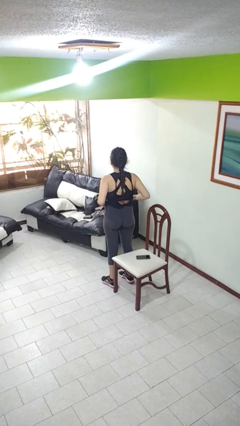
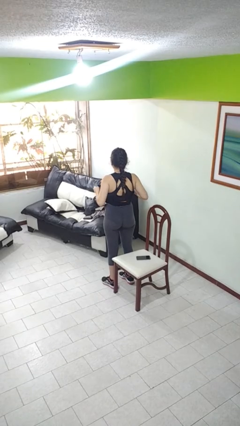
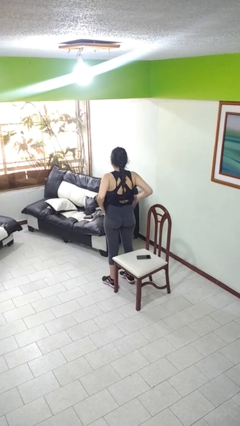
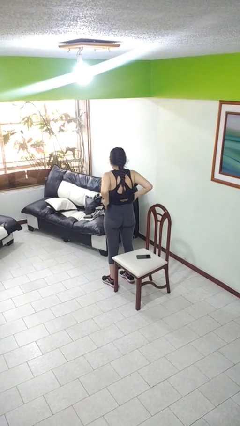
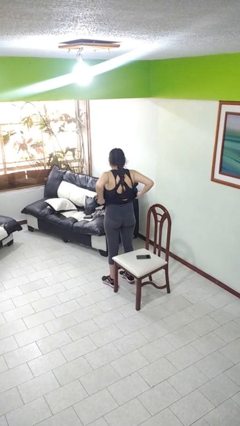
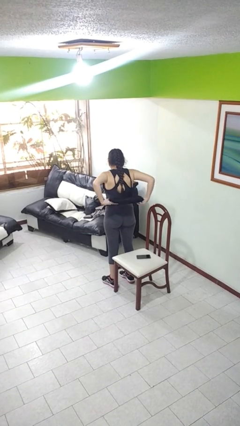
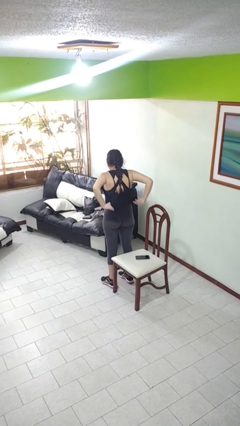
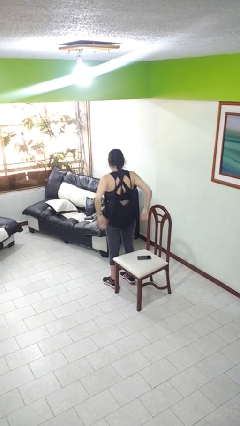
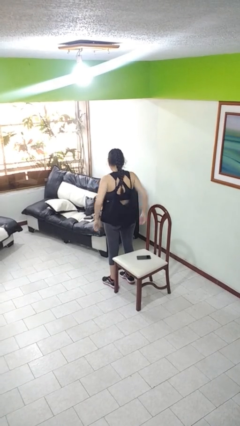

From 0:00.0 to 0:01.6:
person untucks shirt

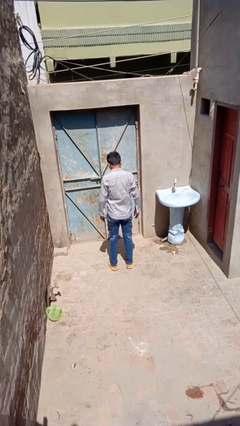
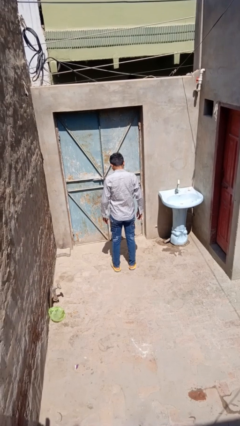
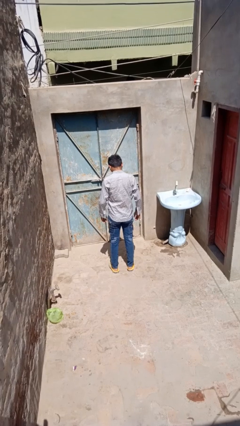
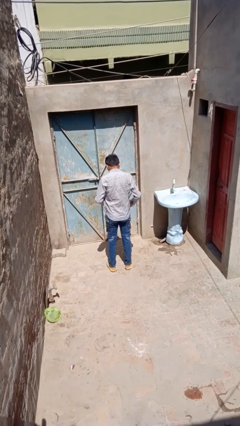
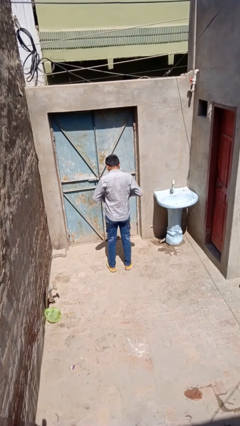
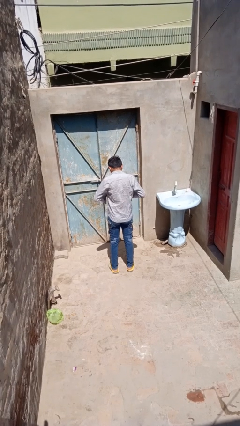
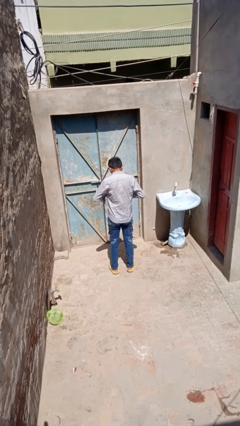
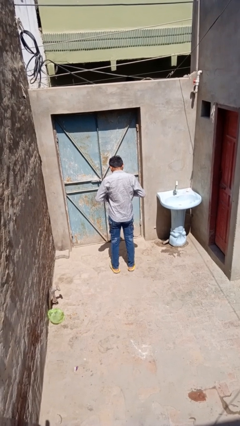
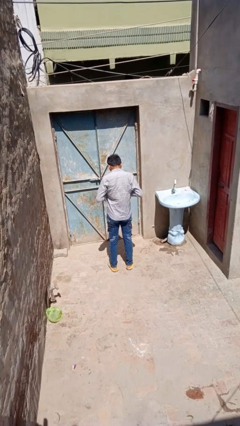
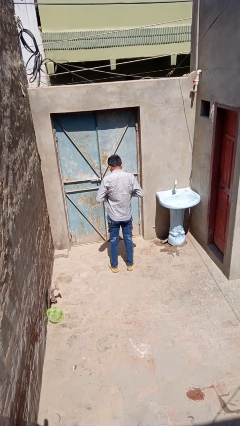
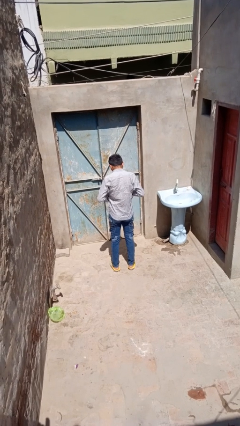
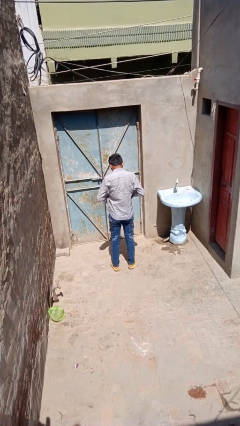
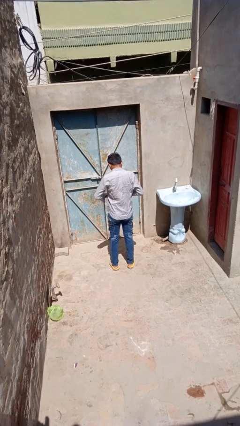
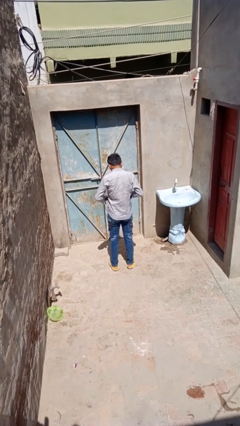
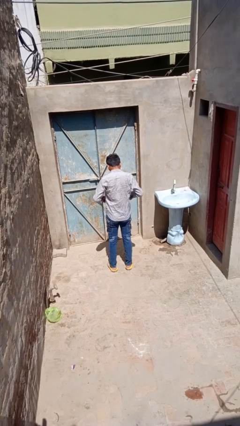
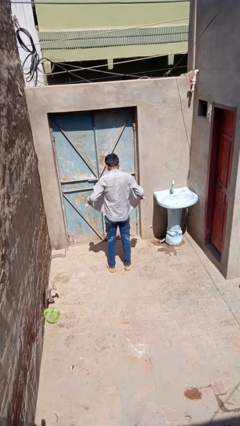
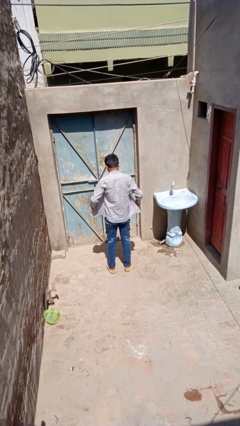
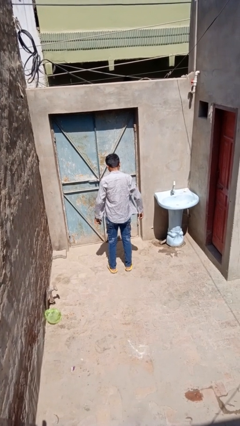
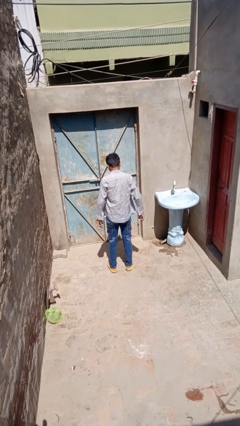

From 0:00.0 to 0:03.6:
person unbuttons shirt

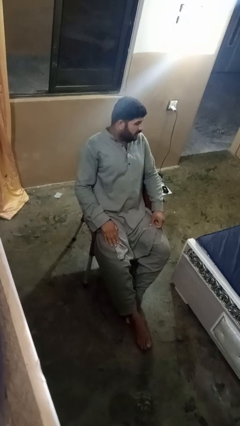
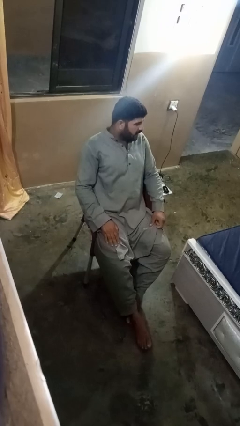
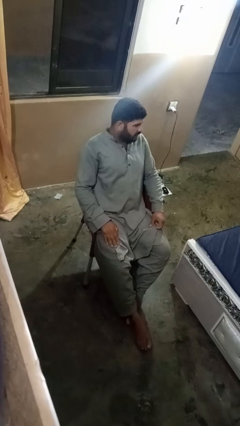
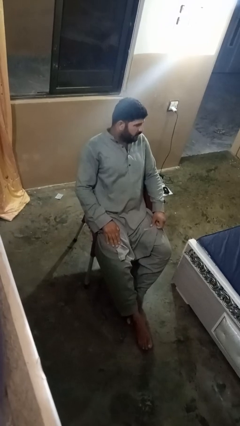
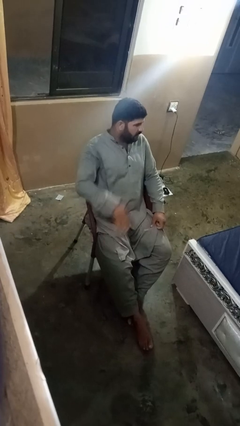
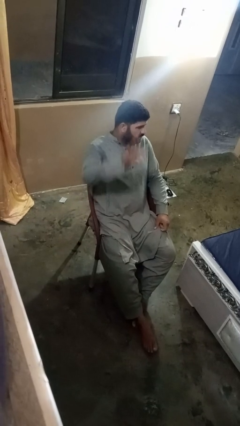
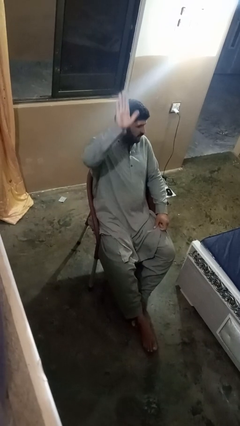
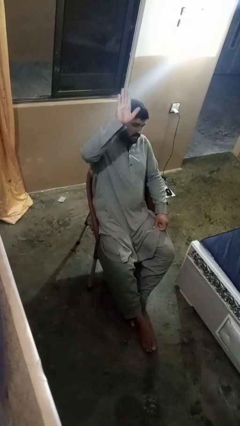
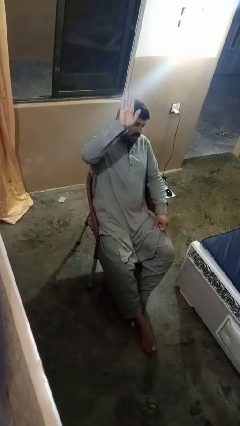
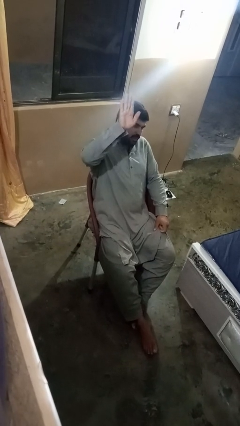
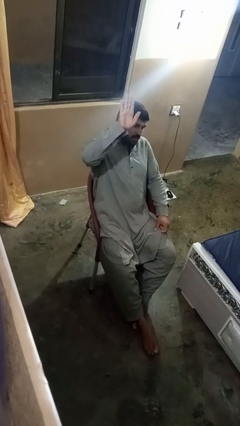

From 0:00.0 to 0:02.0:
person gestures number five

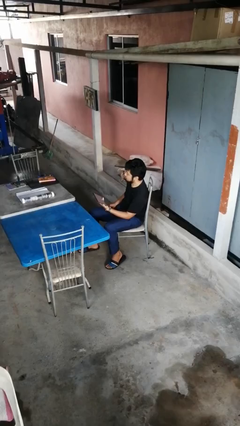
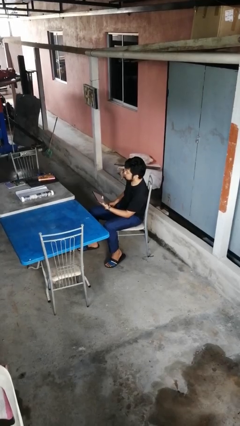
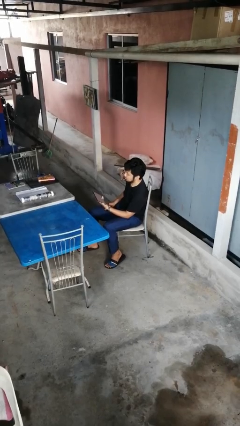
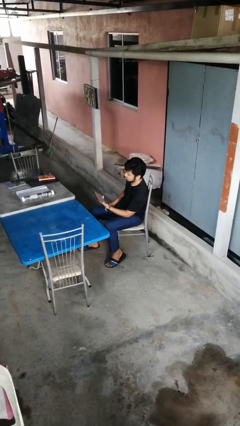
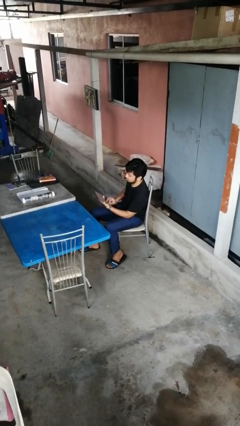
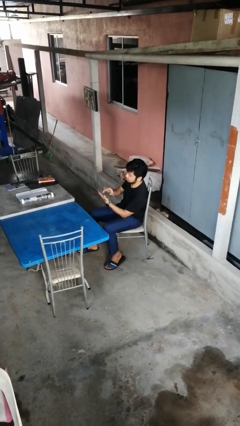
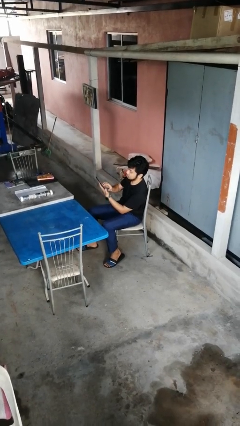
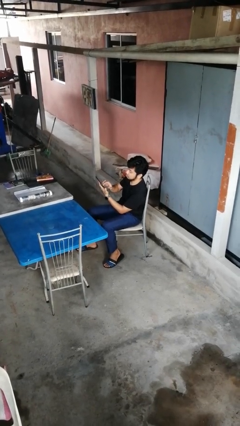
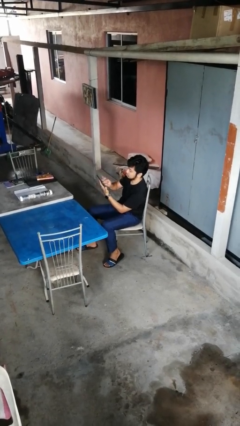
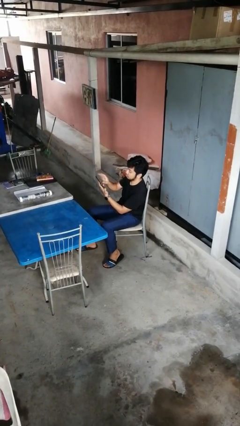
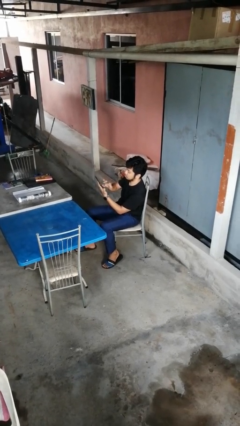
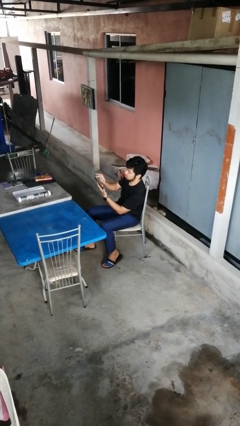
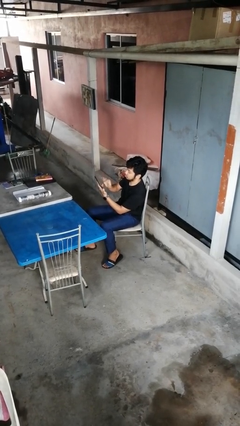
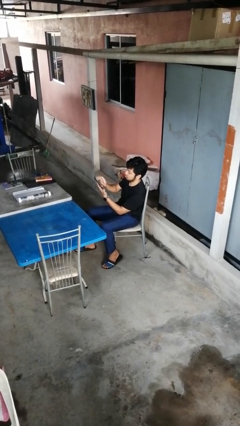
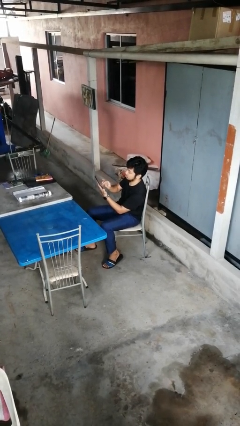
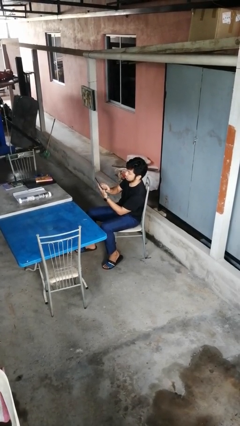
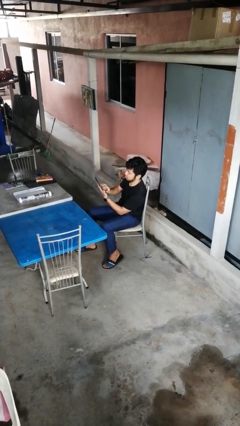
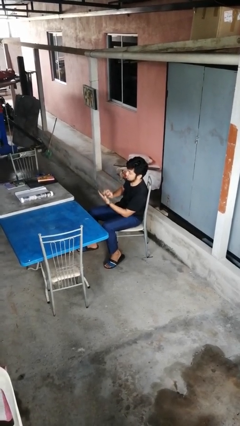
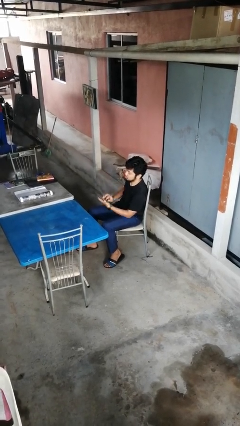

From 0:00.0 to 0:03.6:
person interacts with tablet

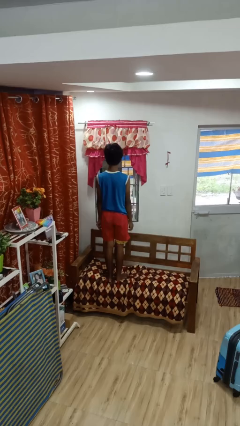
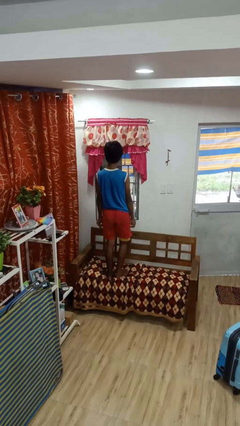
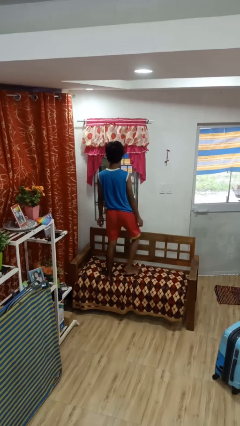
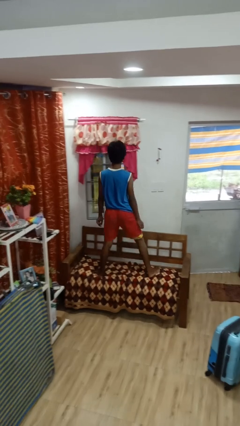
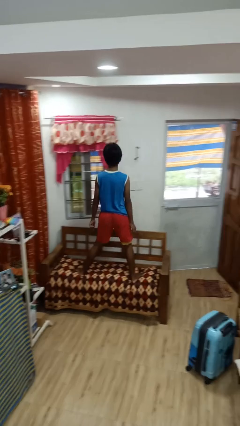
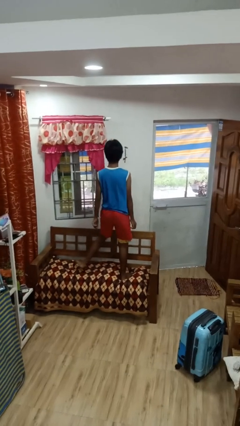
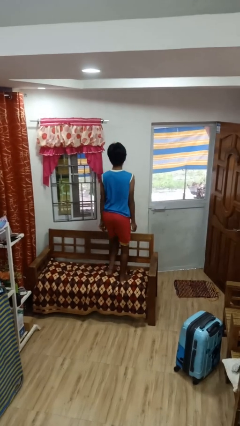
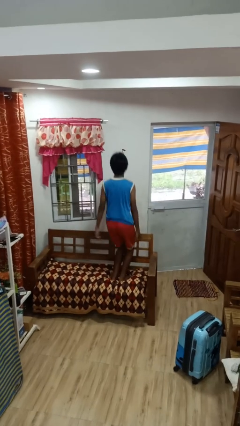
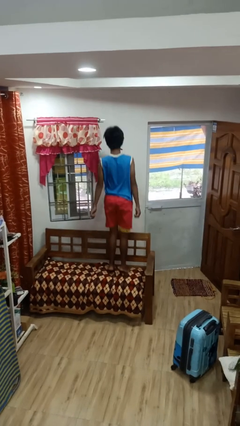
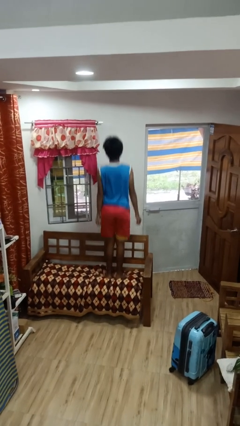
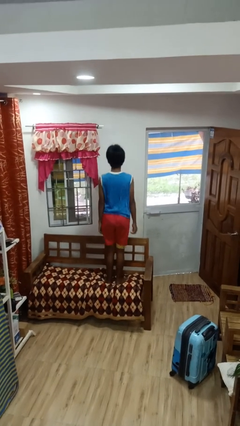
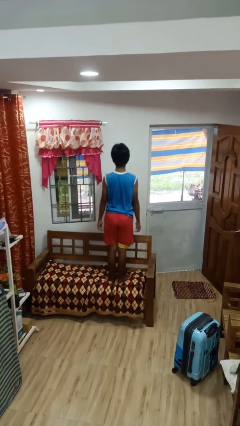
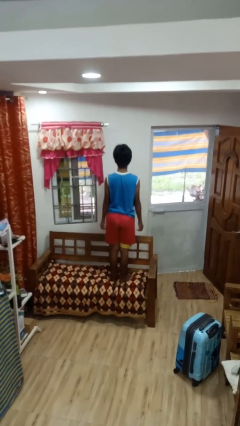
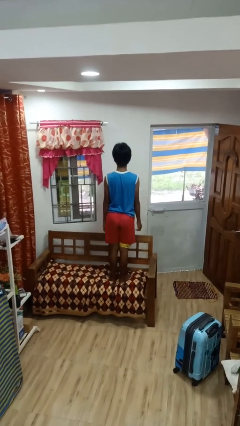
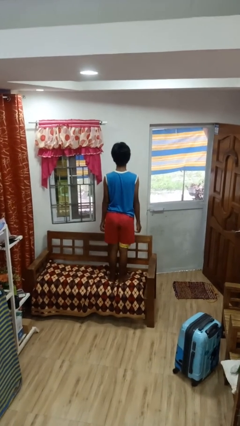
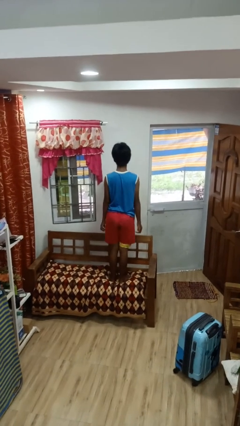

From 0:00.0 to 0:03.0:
person jumps on couch

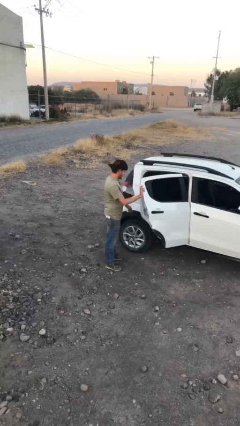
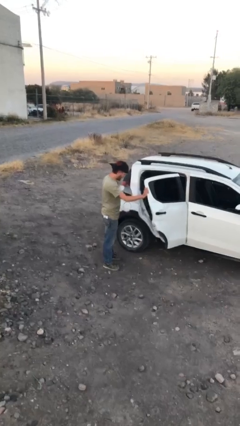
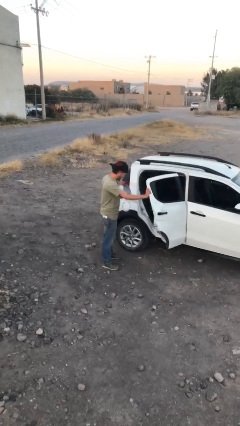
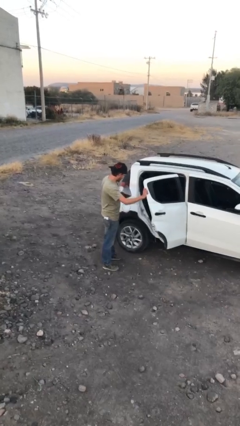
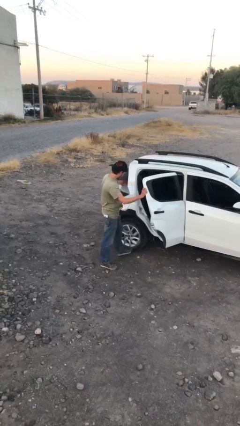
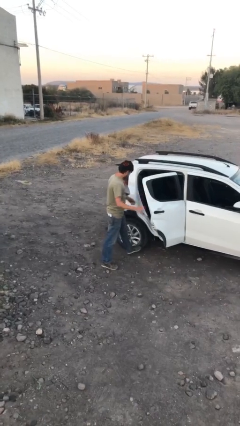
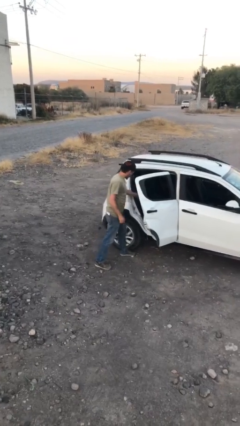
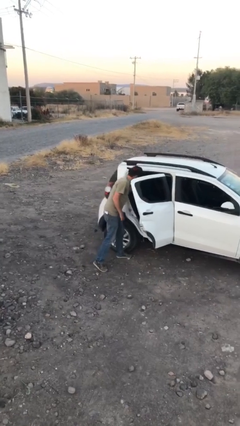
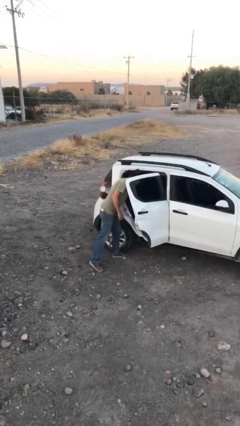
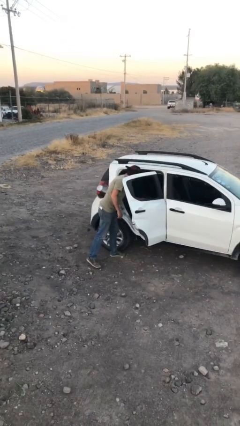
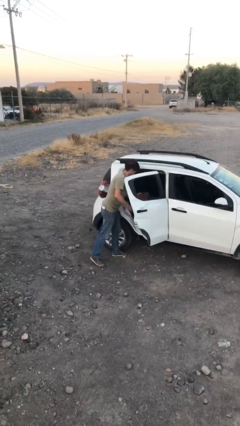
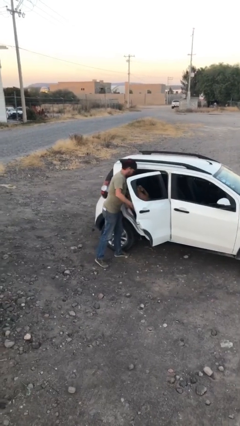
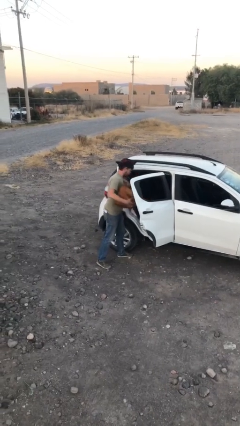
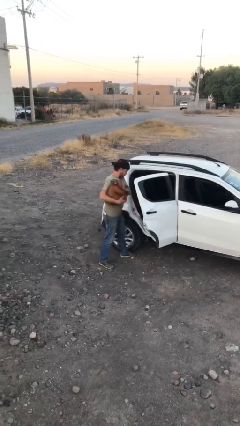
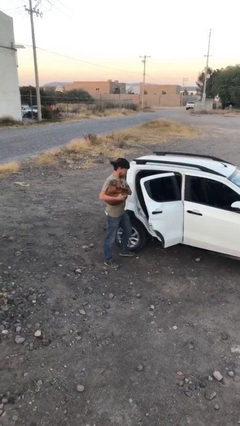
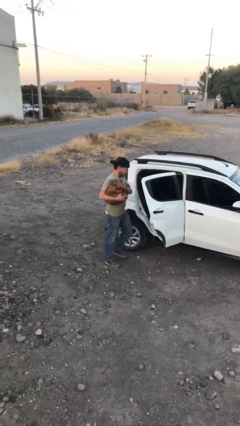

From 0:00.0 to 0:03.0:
person unloads car

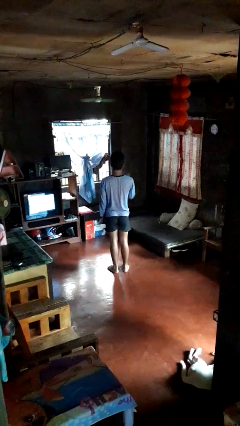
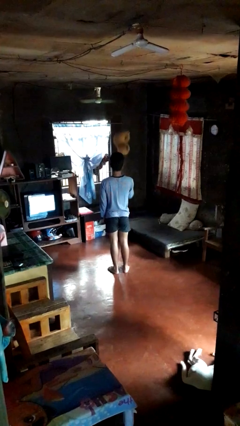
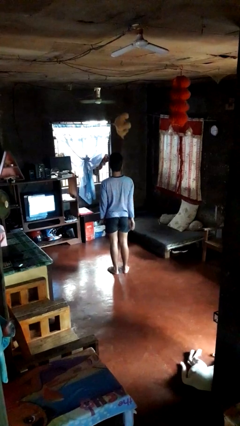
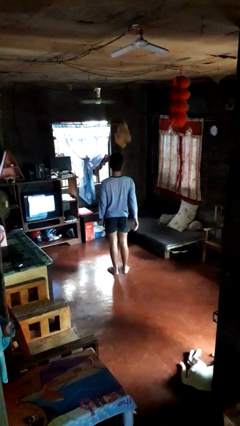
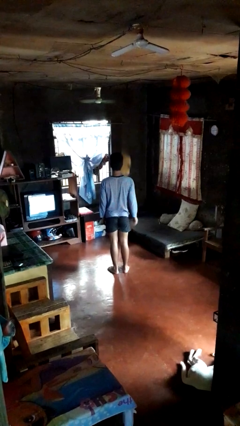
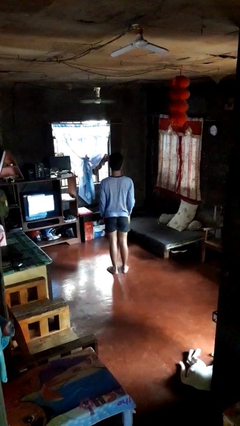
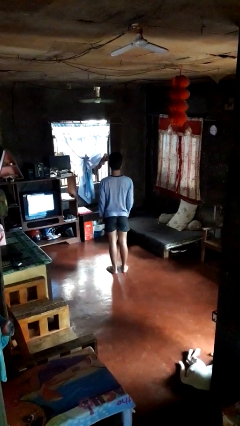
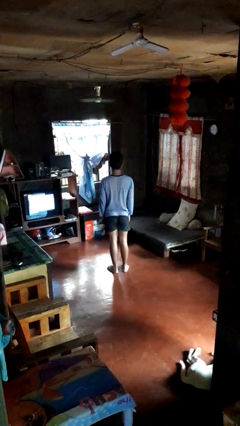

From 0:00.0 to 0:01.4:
person throws object into air
